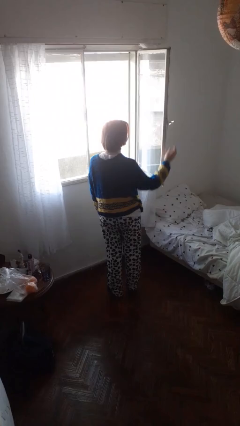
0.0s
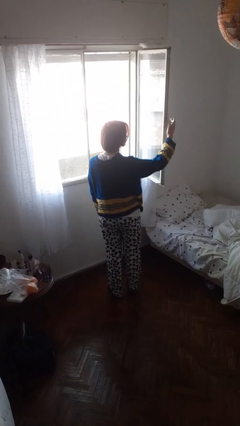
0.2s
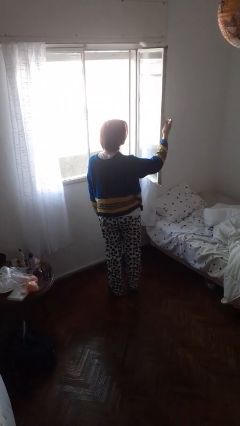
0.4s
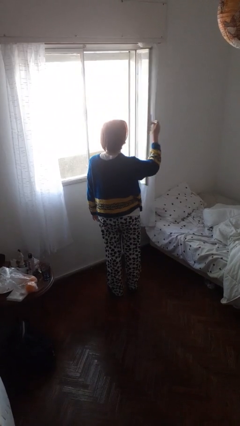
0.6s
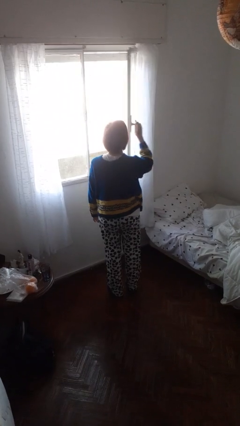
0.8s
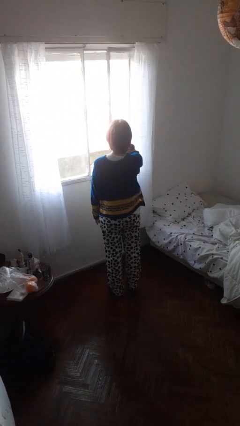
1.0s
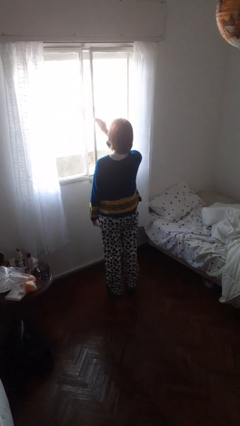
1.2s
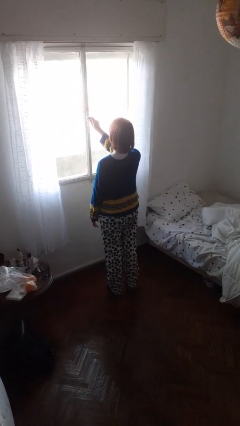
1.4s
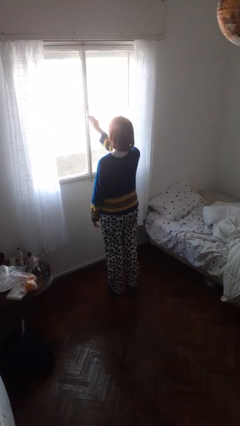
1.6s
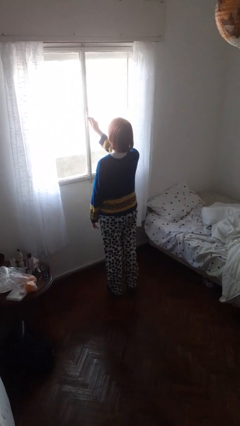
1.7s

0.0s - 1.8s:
person closes home window

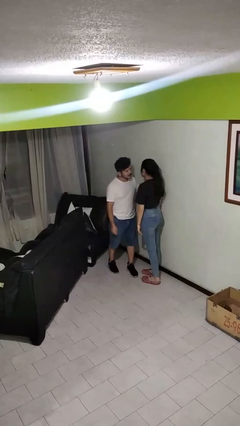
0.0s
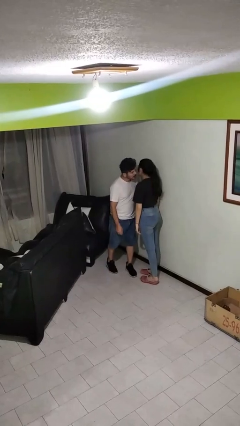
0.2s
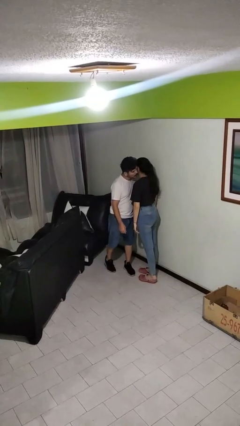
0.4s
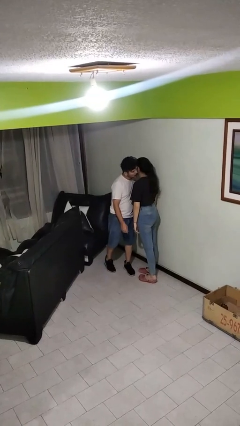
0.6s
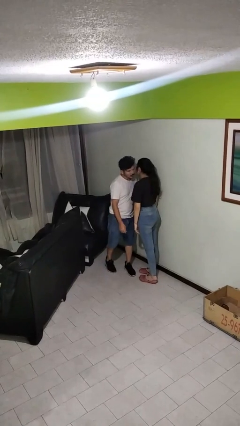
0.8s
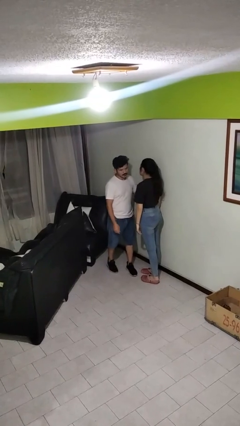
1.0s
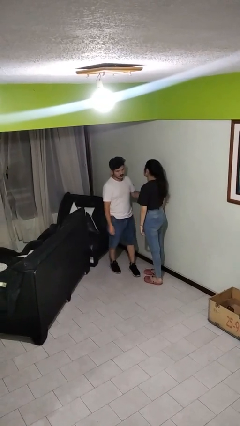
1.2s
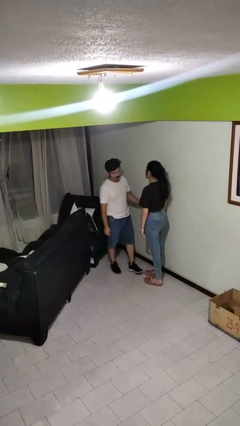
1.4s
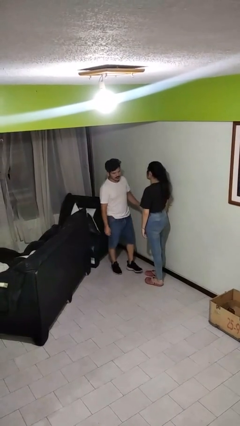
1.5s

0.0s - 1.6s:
person kisses cheek of person

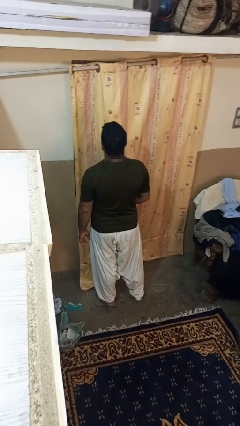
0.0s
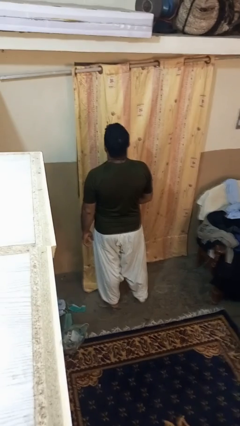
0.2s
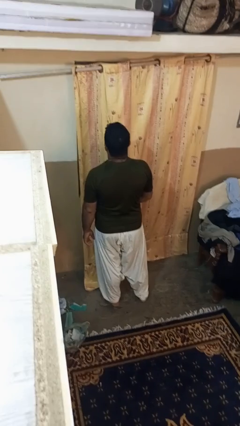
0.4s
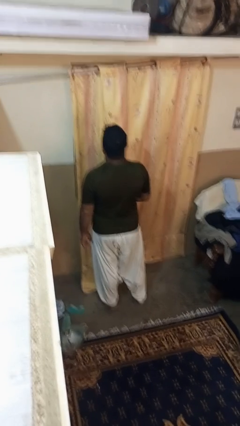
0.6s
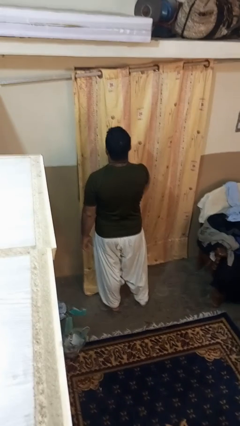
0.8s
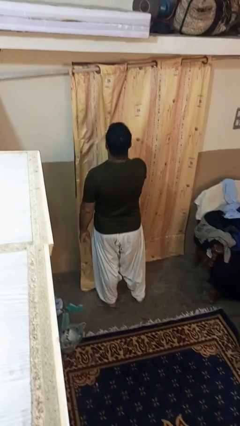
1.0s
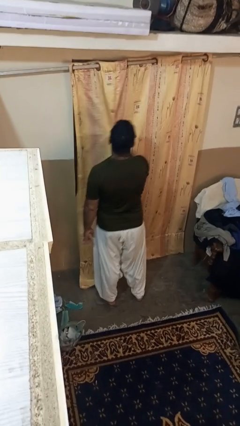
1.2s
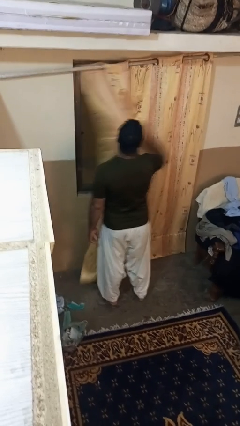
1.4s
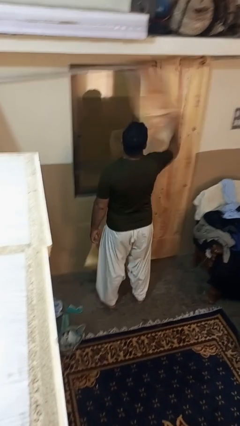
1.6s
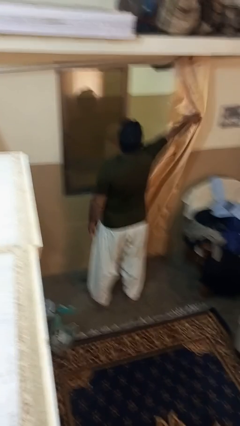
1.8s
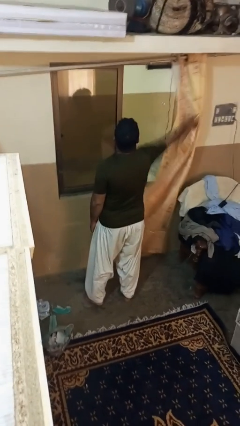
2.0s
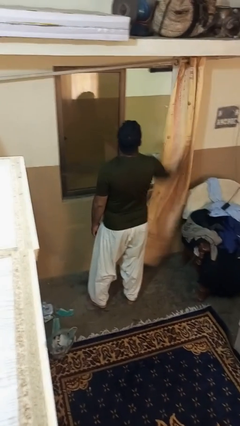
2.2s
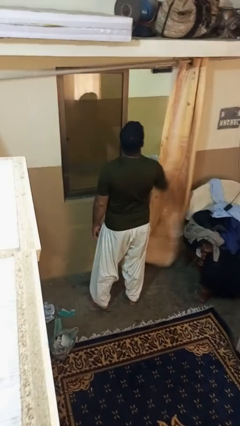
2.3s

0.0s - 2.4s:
person opens curtains

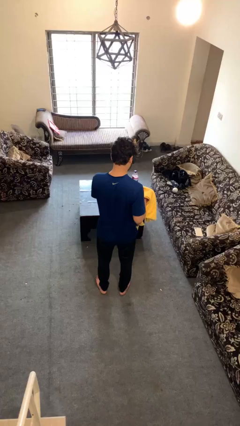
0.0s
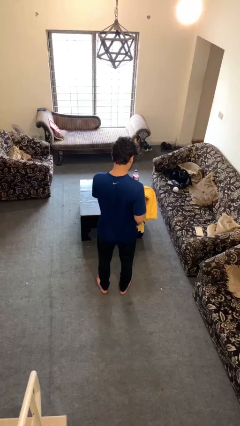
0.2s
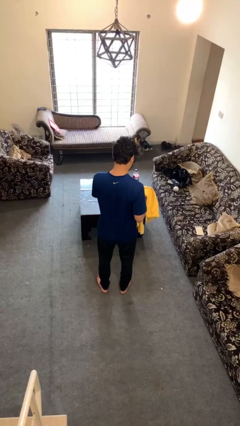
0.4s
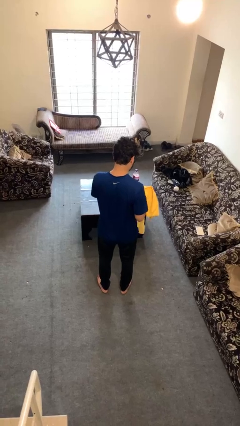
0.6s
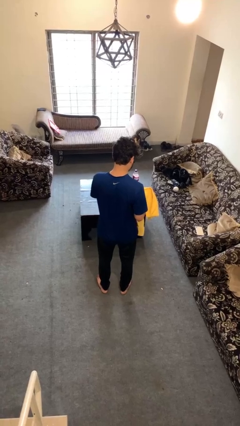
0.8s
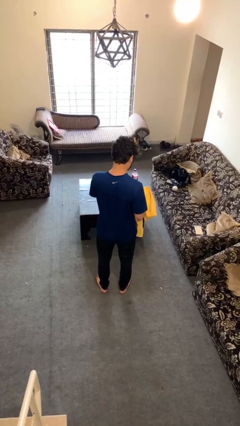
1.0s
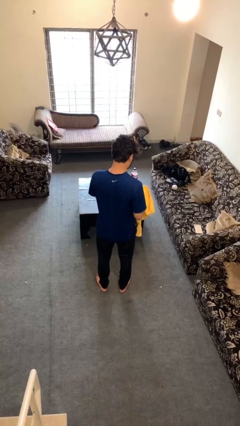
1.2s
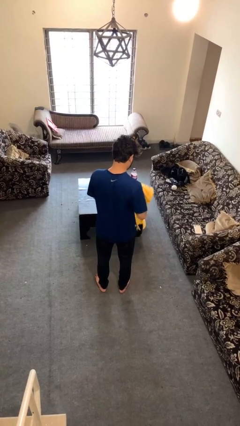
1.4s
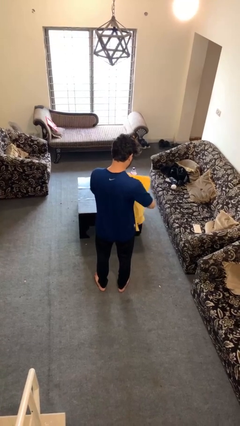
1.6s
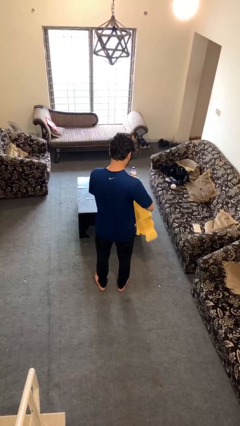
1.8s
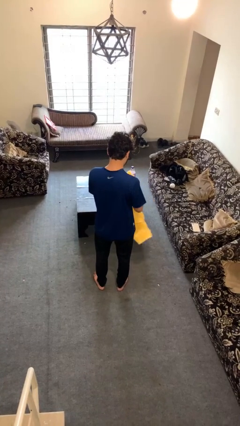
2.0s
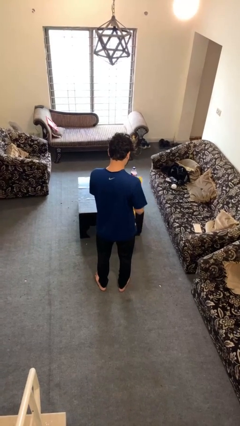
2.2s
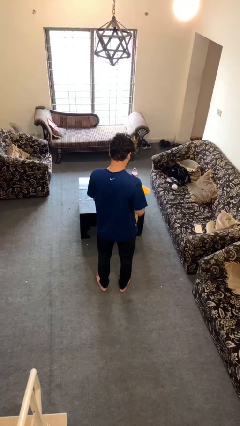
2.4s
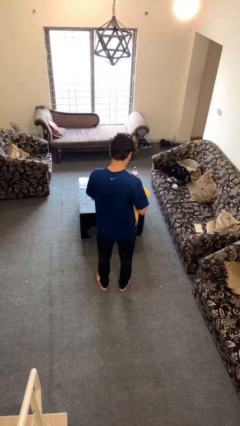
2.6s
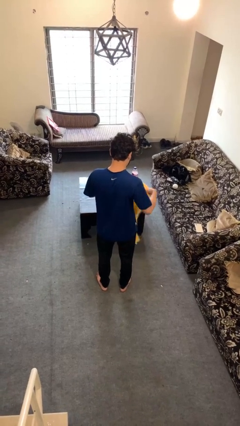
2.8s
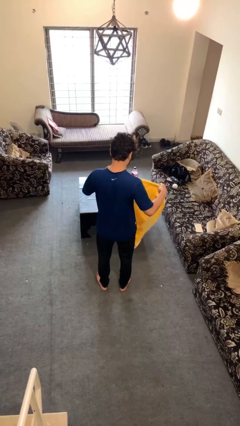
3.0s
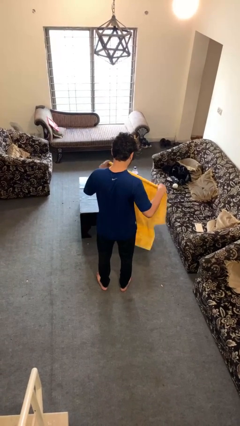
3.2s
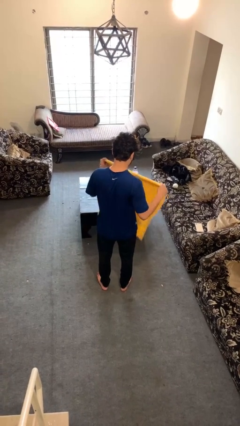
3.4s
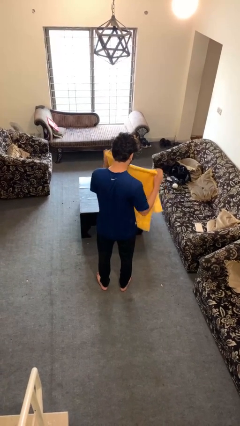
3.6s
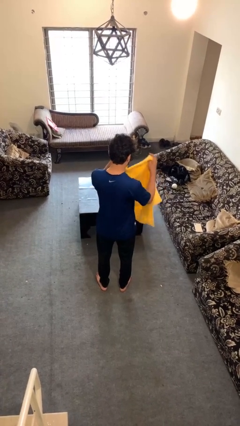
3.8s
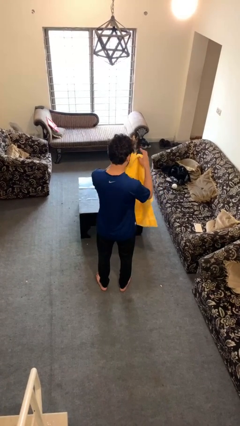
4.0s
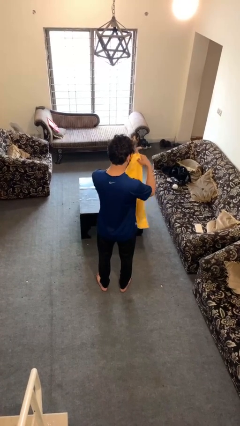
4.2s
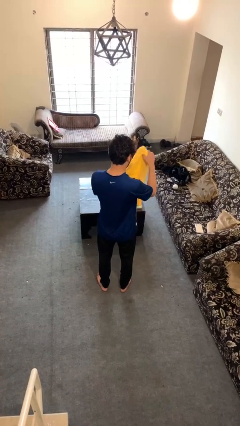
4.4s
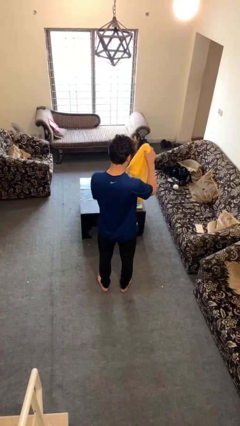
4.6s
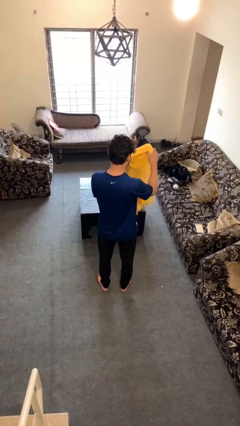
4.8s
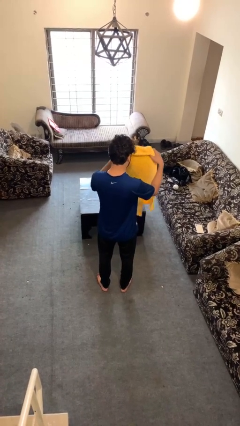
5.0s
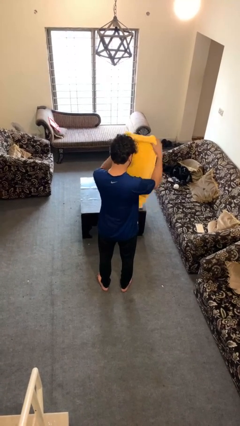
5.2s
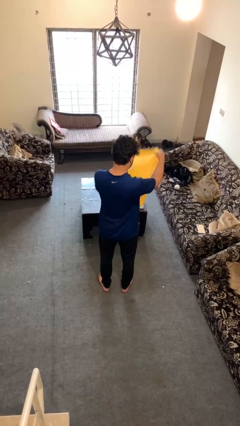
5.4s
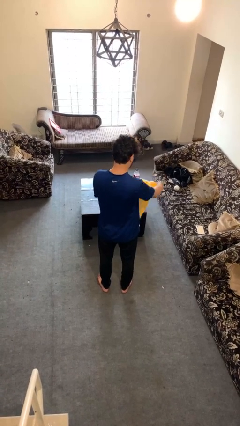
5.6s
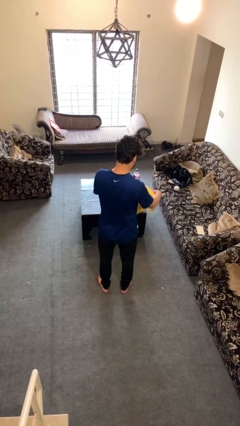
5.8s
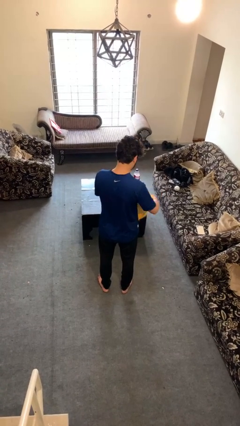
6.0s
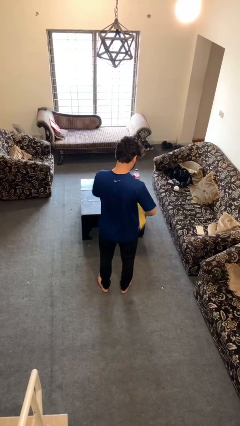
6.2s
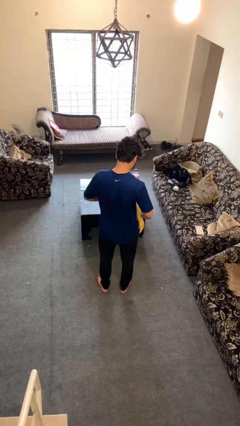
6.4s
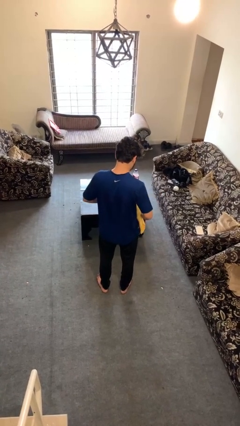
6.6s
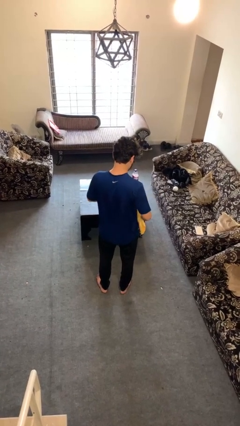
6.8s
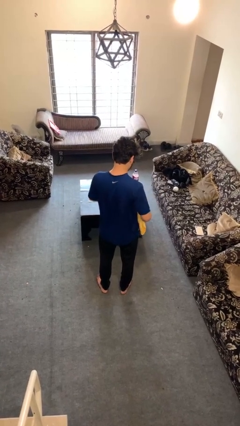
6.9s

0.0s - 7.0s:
person folds towel

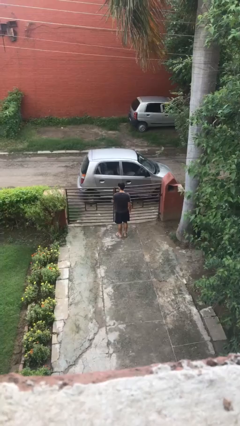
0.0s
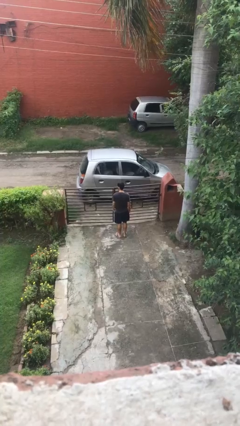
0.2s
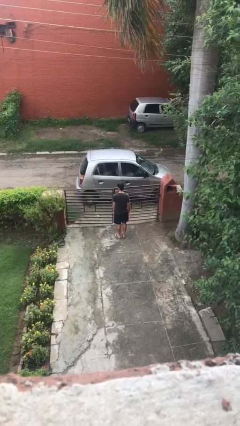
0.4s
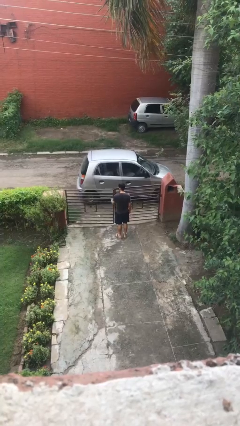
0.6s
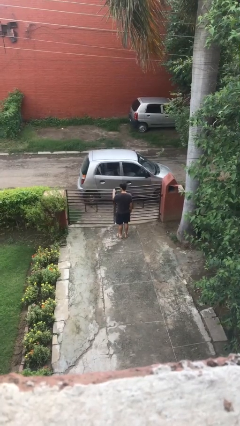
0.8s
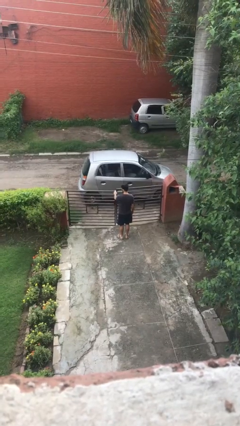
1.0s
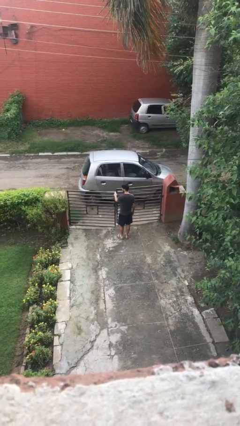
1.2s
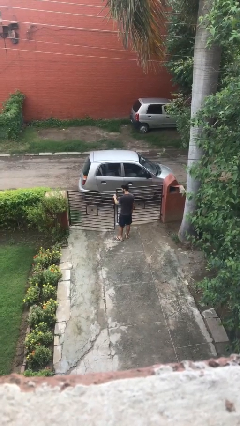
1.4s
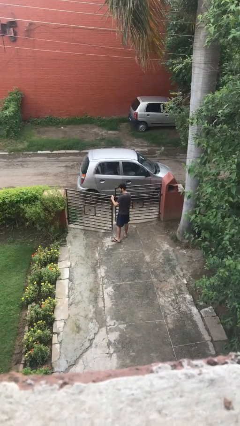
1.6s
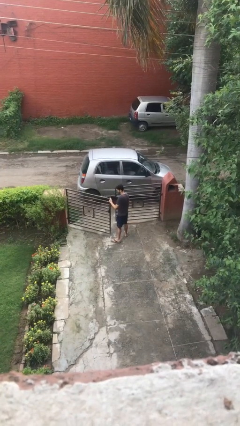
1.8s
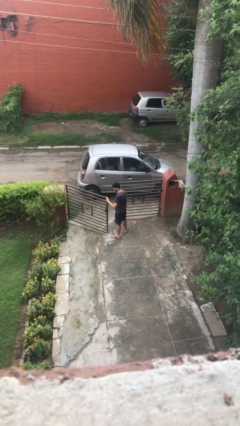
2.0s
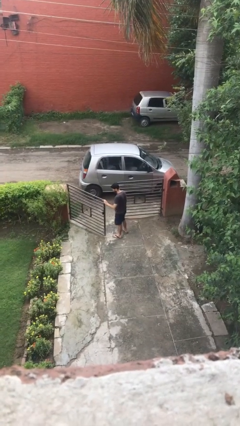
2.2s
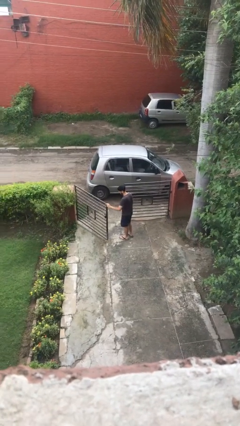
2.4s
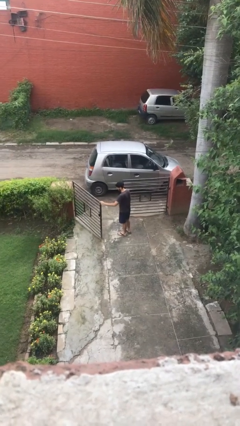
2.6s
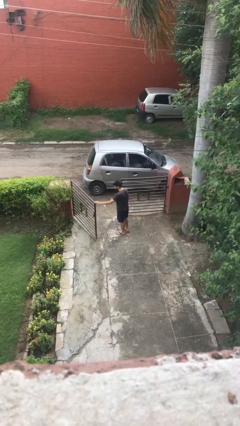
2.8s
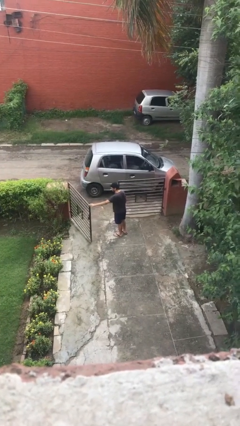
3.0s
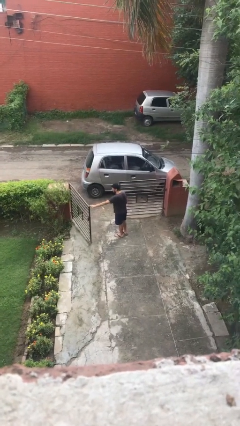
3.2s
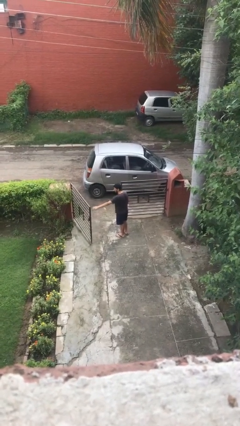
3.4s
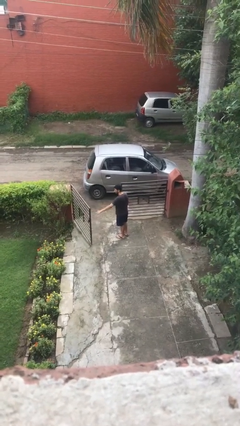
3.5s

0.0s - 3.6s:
person opens gate

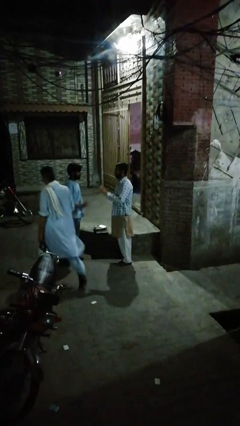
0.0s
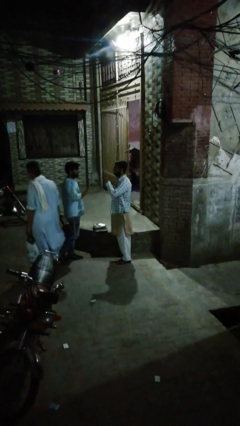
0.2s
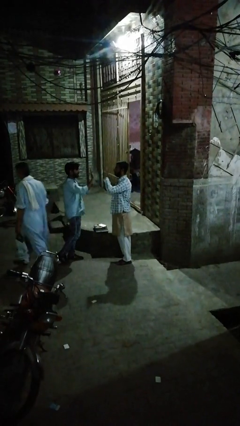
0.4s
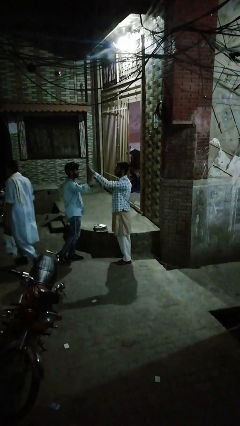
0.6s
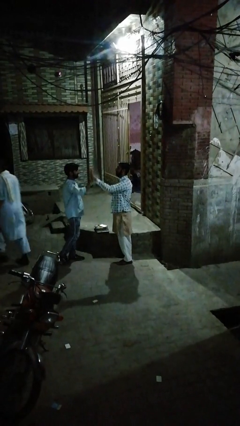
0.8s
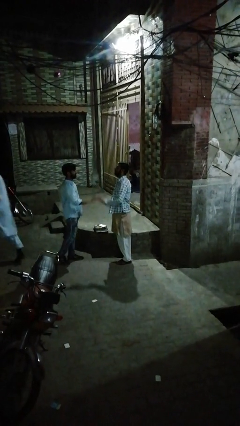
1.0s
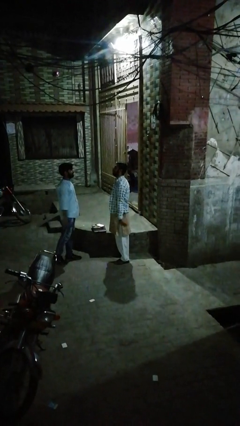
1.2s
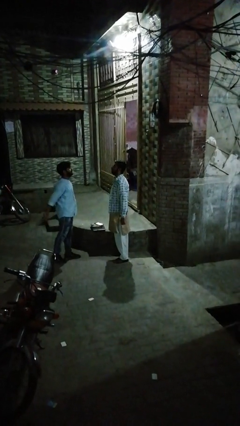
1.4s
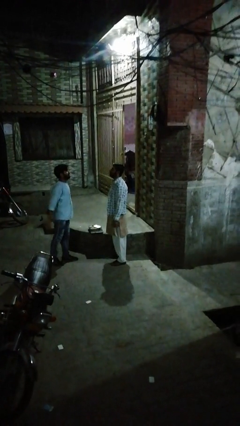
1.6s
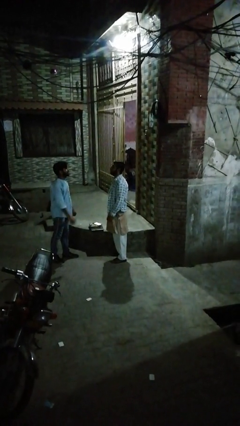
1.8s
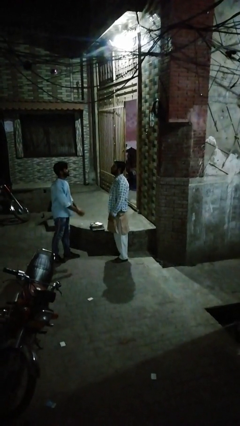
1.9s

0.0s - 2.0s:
person highfives hand
